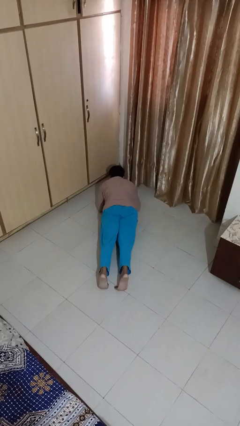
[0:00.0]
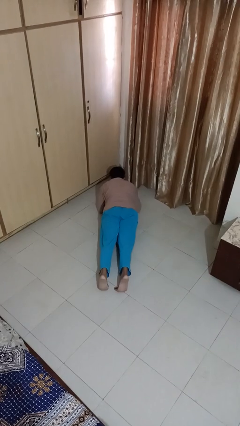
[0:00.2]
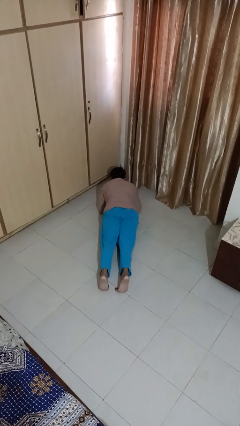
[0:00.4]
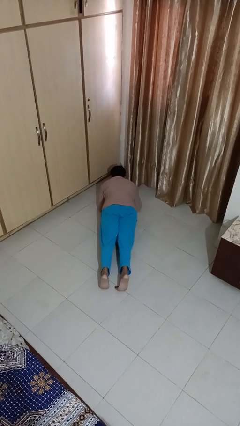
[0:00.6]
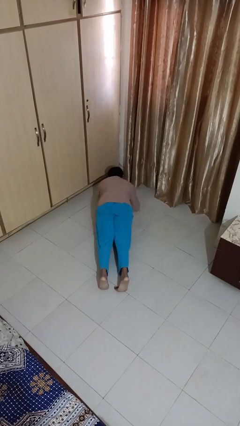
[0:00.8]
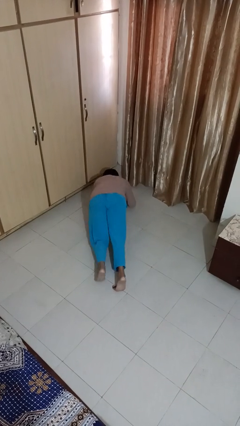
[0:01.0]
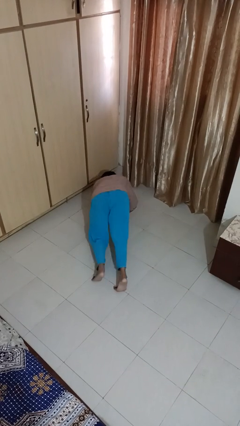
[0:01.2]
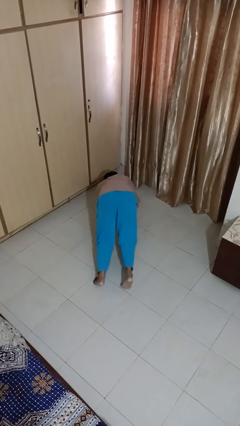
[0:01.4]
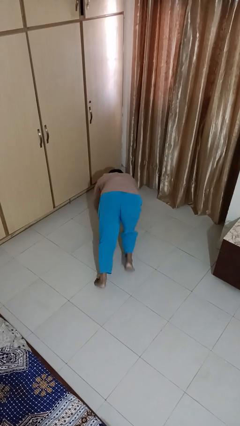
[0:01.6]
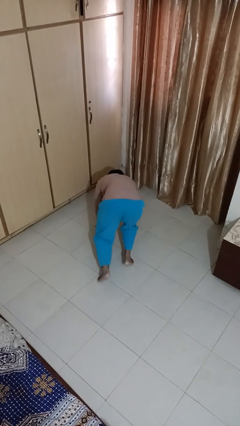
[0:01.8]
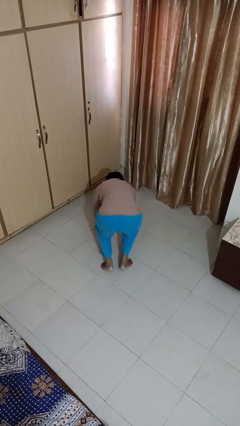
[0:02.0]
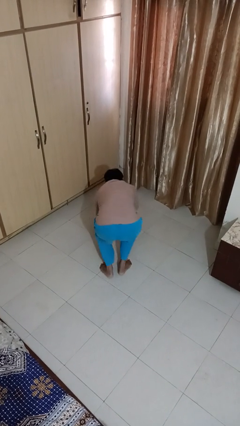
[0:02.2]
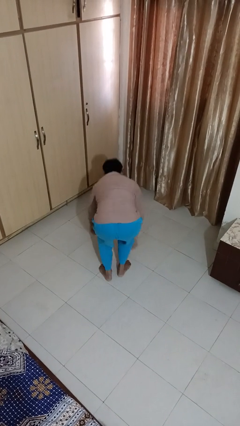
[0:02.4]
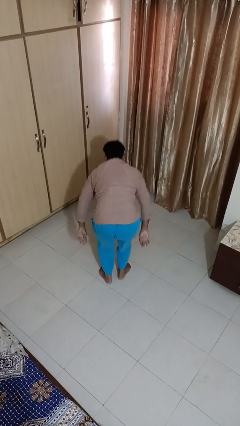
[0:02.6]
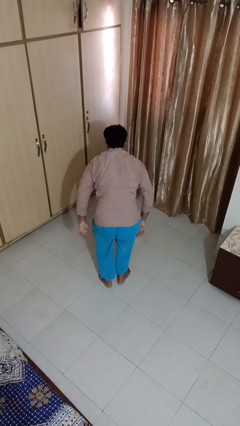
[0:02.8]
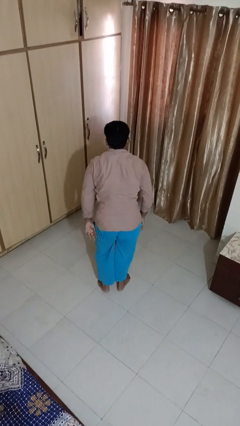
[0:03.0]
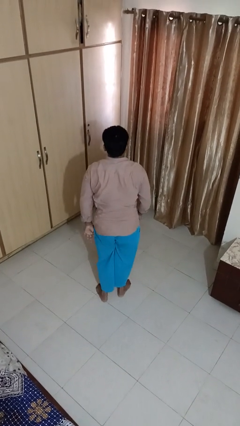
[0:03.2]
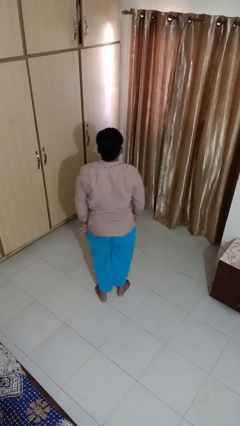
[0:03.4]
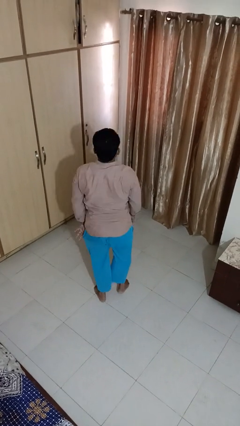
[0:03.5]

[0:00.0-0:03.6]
person stands up from floor

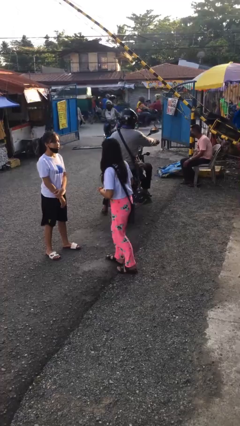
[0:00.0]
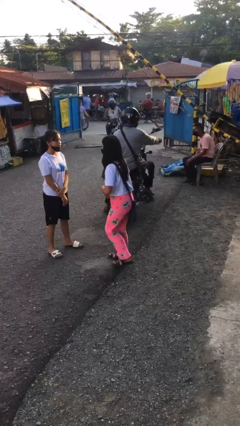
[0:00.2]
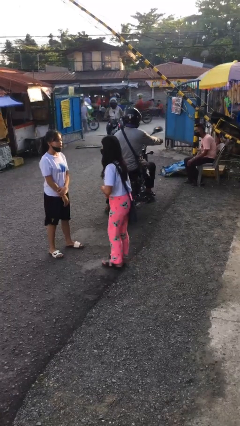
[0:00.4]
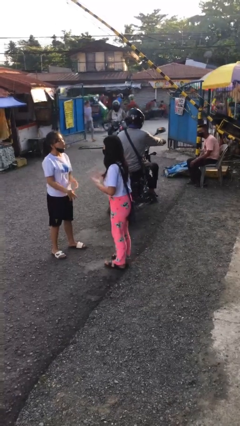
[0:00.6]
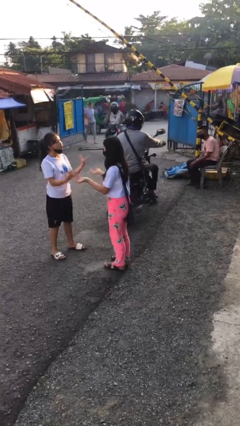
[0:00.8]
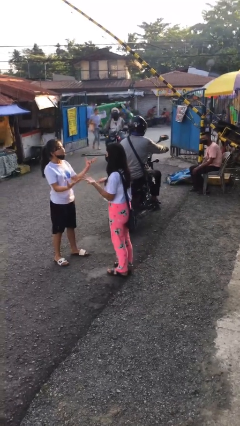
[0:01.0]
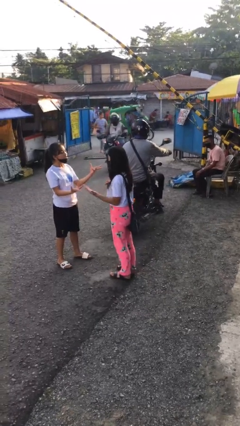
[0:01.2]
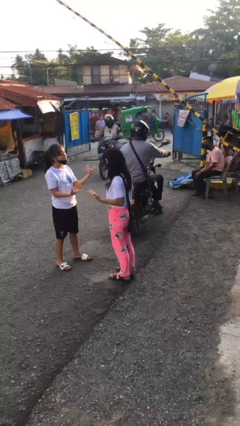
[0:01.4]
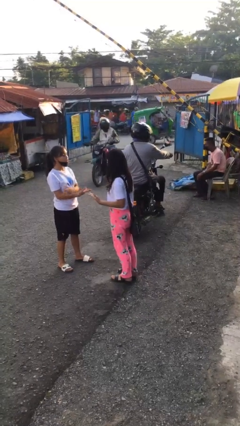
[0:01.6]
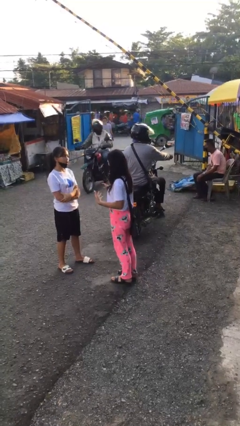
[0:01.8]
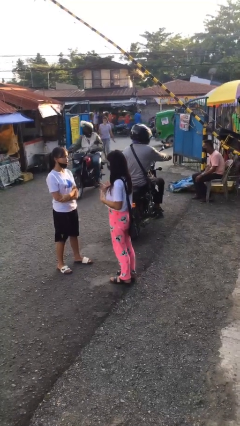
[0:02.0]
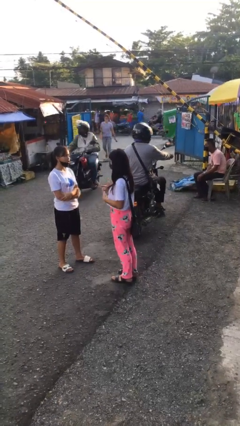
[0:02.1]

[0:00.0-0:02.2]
person talks to person

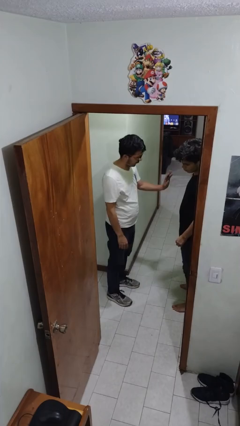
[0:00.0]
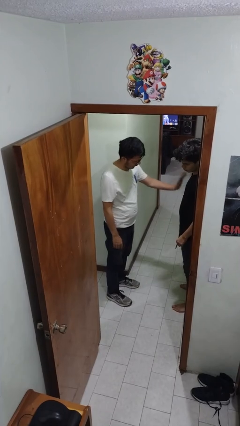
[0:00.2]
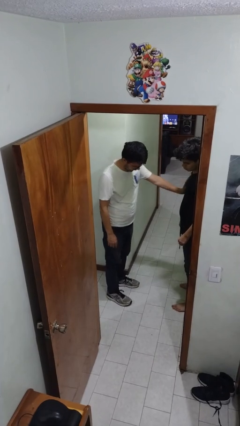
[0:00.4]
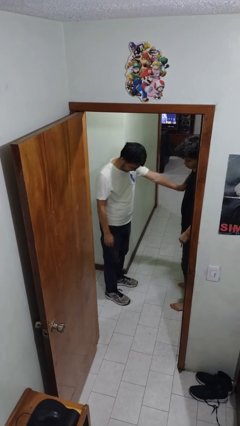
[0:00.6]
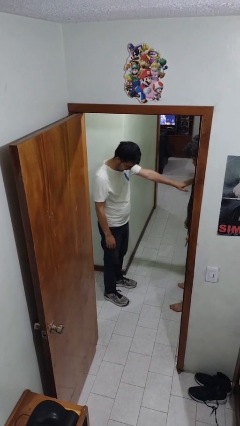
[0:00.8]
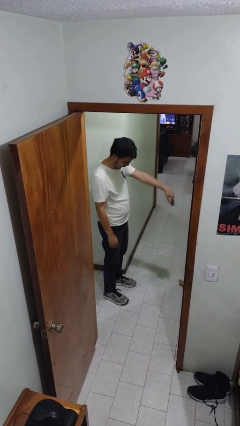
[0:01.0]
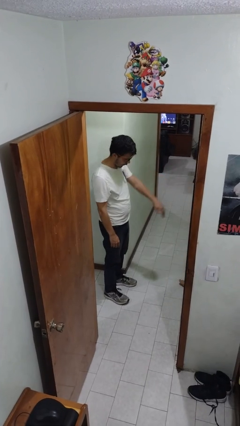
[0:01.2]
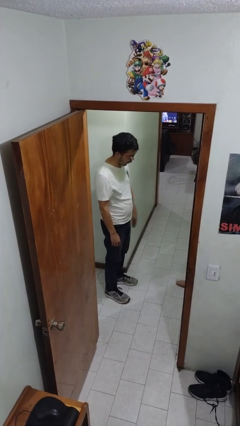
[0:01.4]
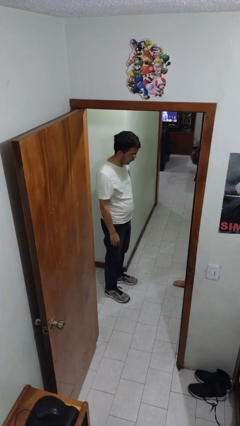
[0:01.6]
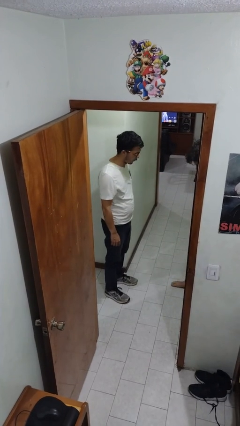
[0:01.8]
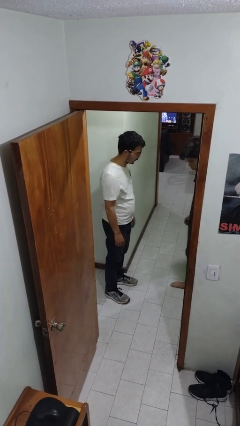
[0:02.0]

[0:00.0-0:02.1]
person shoves person

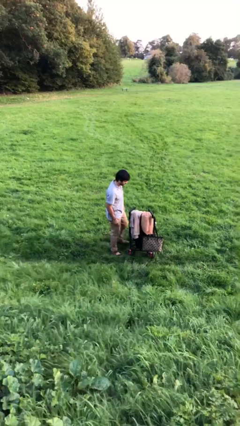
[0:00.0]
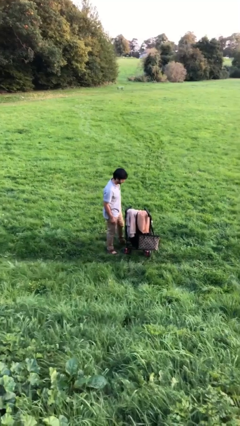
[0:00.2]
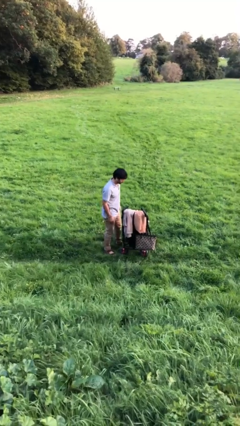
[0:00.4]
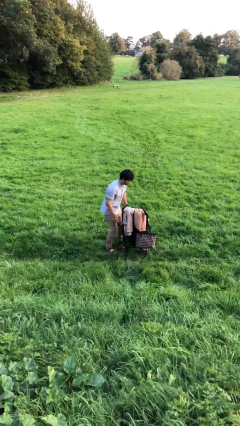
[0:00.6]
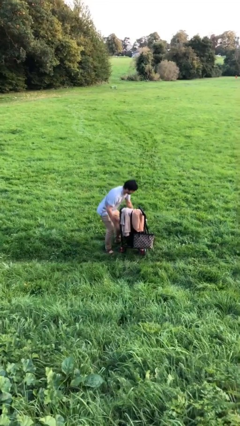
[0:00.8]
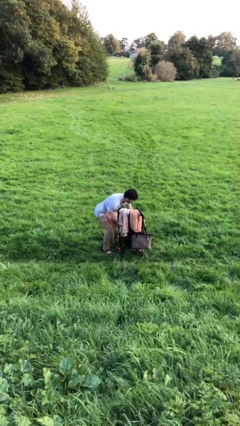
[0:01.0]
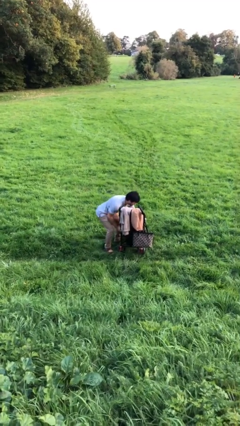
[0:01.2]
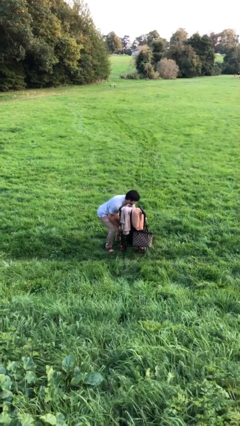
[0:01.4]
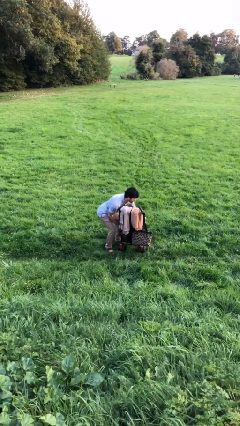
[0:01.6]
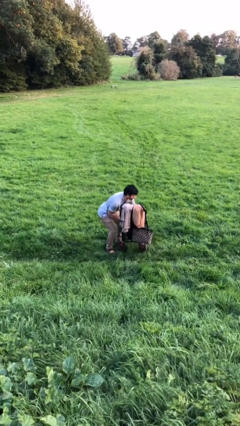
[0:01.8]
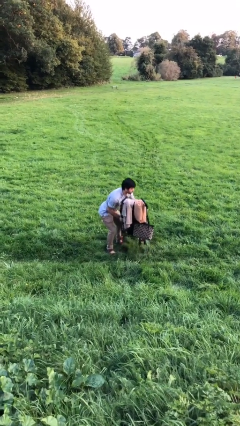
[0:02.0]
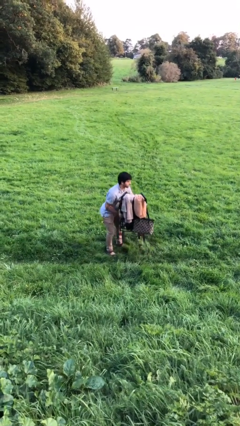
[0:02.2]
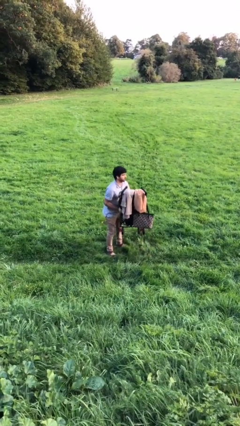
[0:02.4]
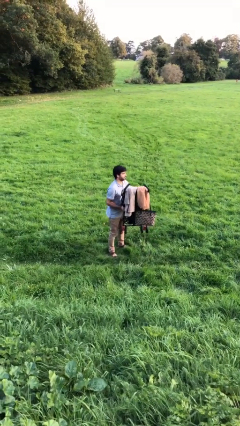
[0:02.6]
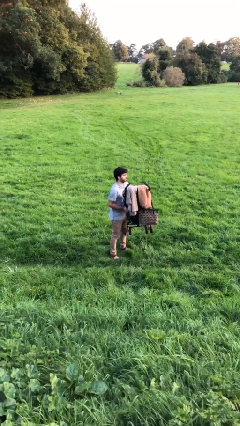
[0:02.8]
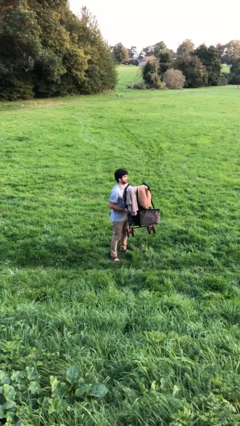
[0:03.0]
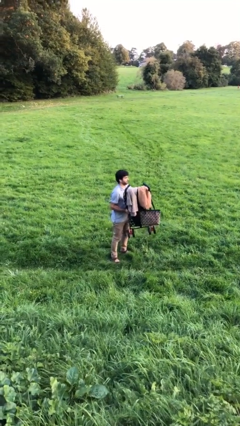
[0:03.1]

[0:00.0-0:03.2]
person picks up object from floor

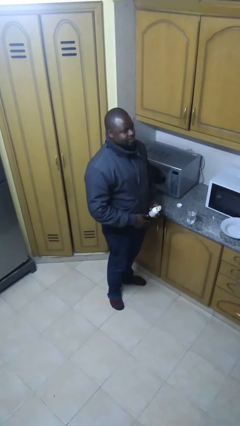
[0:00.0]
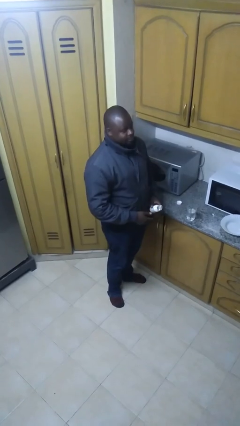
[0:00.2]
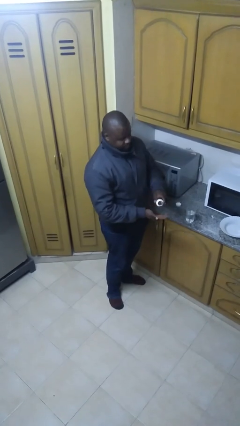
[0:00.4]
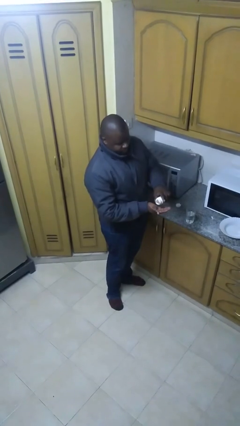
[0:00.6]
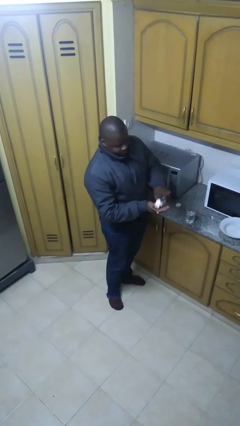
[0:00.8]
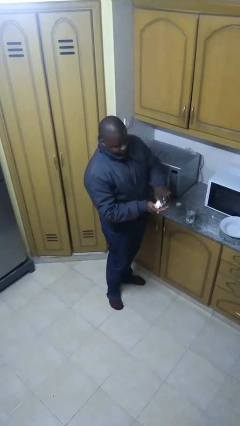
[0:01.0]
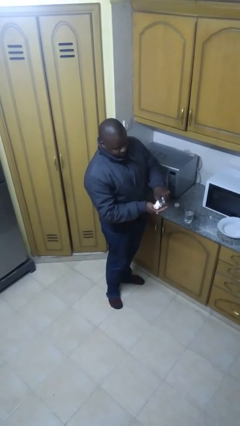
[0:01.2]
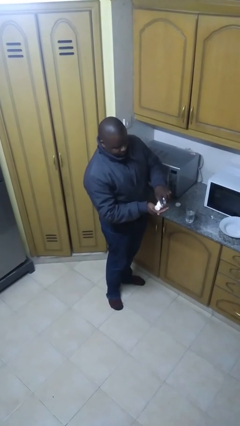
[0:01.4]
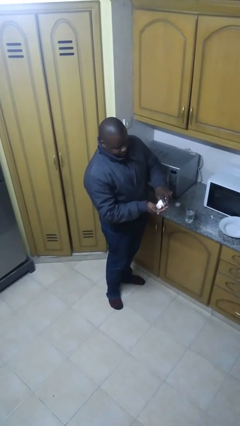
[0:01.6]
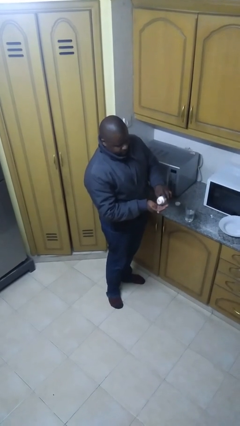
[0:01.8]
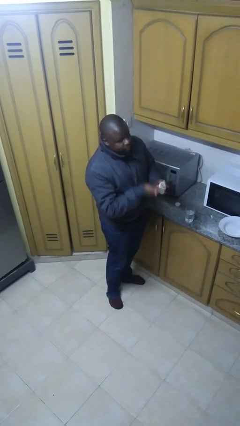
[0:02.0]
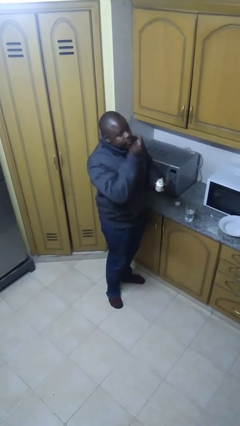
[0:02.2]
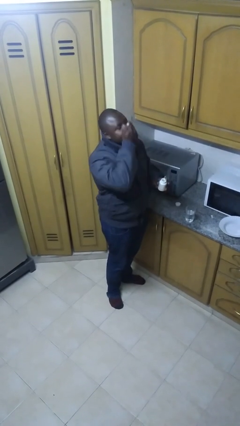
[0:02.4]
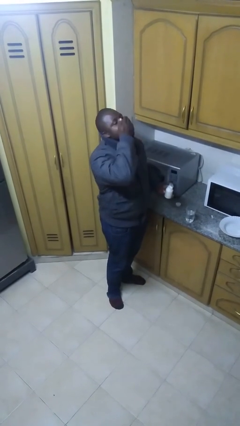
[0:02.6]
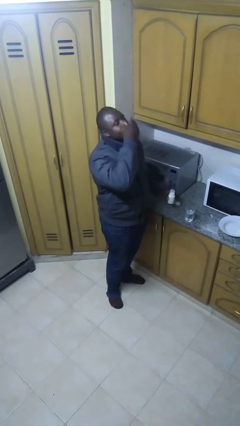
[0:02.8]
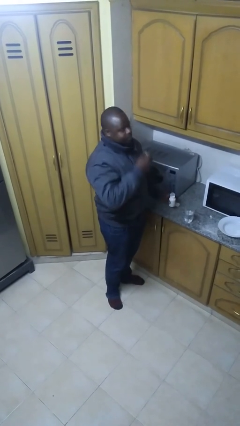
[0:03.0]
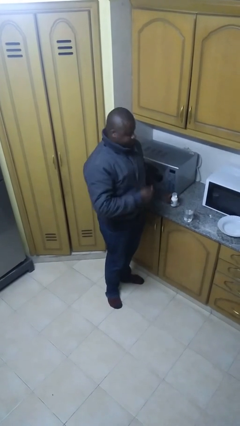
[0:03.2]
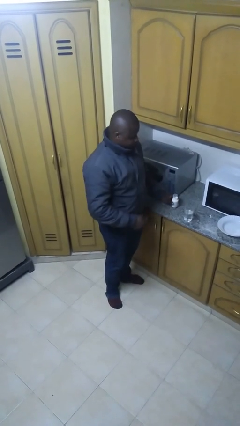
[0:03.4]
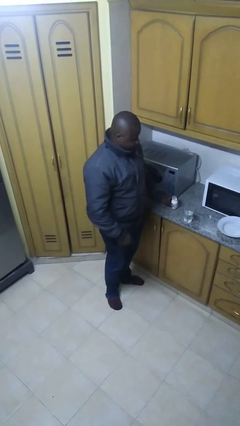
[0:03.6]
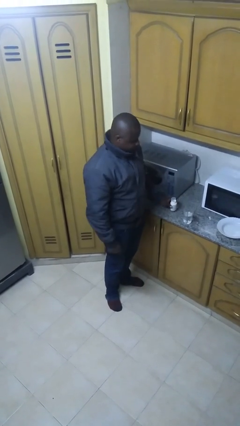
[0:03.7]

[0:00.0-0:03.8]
person takes medicine pills

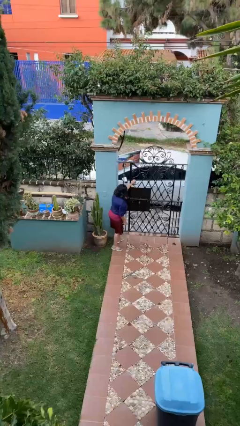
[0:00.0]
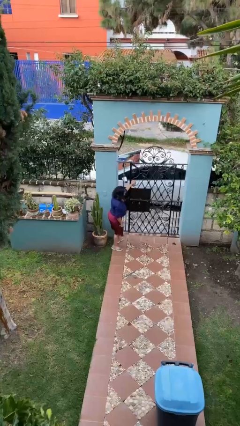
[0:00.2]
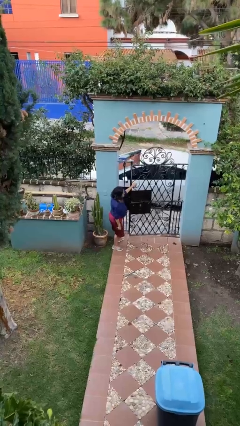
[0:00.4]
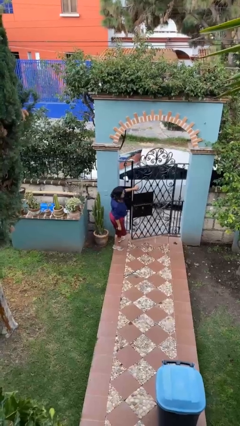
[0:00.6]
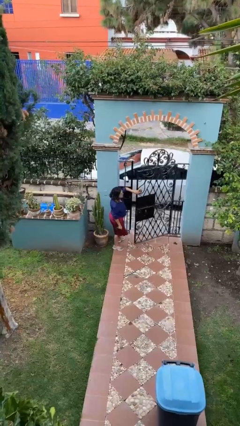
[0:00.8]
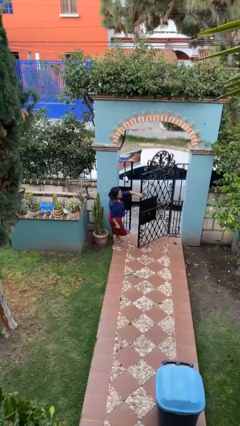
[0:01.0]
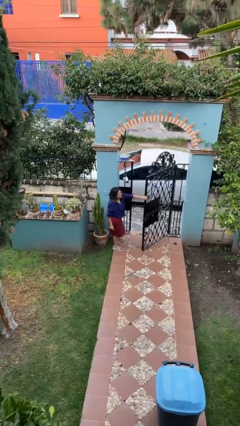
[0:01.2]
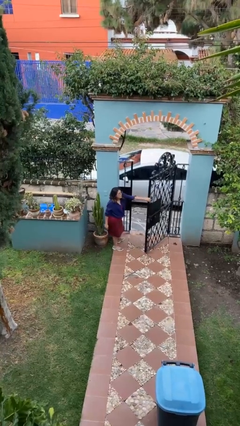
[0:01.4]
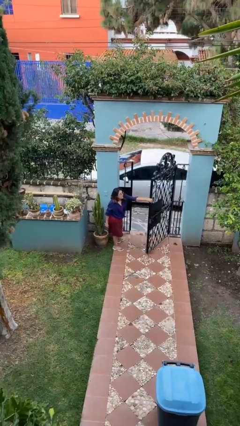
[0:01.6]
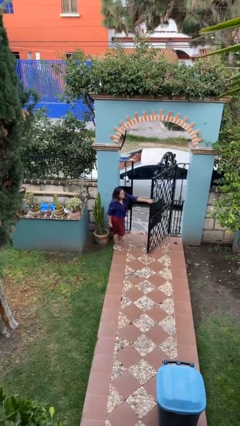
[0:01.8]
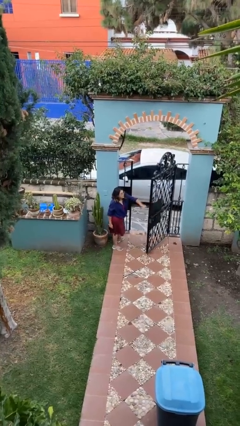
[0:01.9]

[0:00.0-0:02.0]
person opens facility door

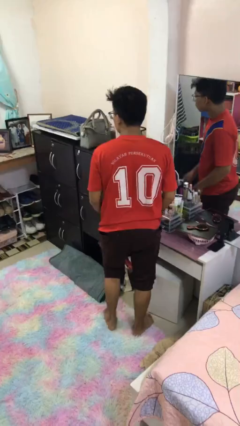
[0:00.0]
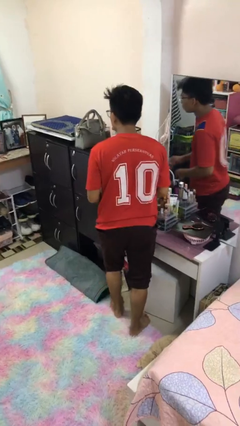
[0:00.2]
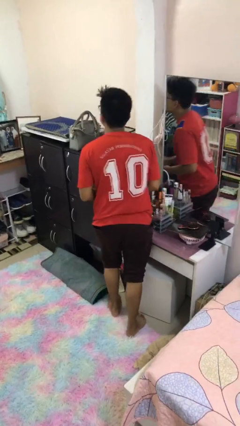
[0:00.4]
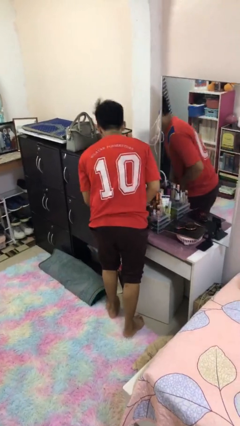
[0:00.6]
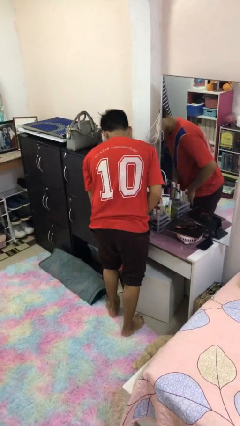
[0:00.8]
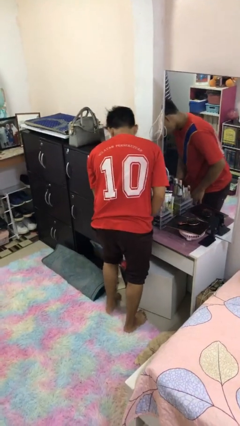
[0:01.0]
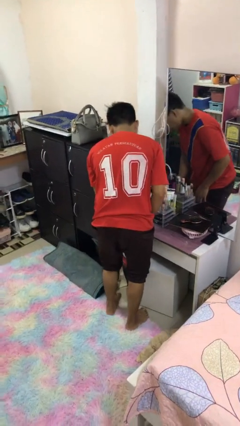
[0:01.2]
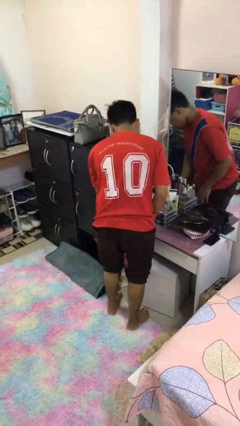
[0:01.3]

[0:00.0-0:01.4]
person bumps into table
